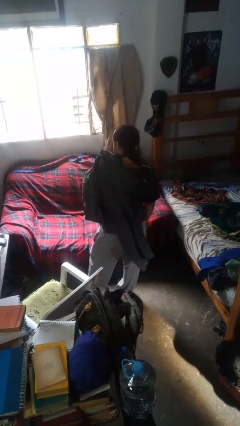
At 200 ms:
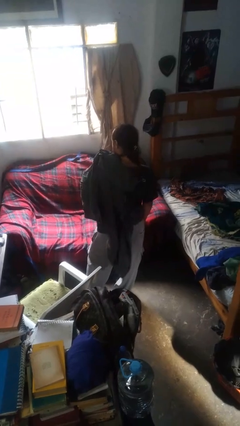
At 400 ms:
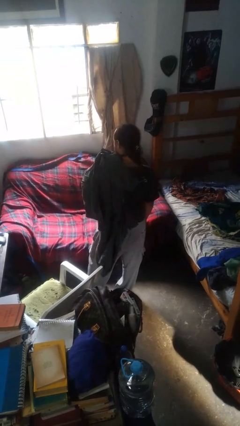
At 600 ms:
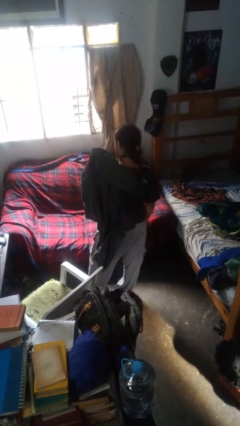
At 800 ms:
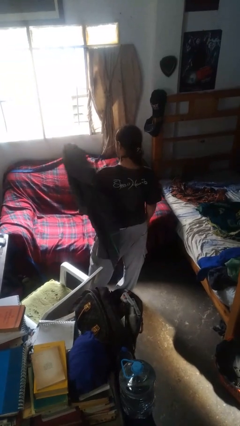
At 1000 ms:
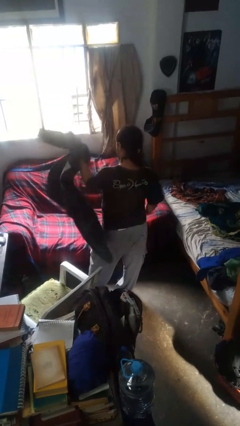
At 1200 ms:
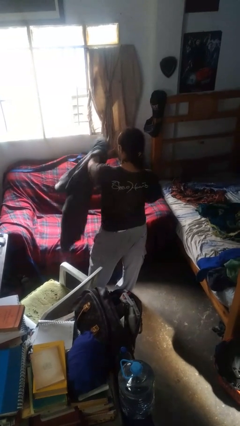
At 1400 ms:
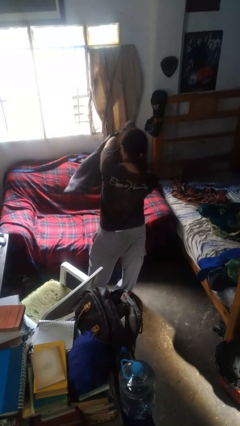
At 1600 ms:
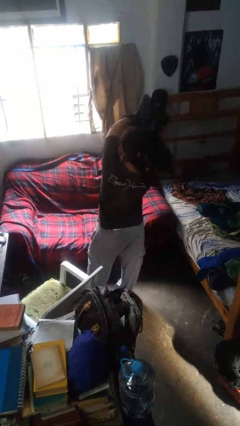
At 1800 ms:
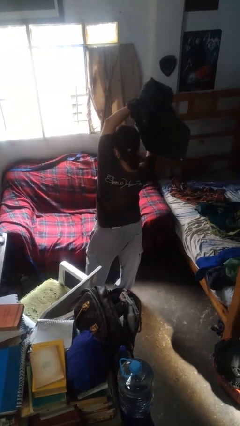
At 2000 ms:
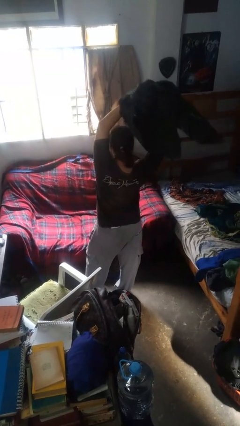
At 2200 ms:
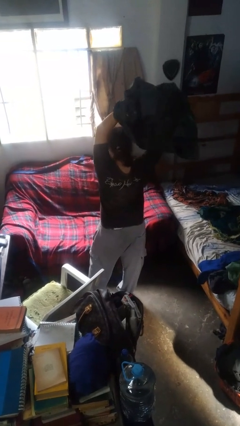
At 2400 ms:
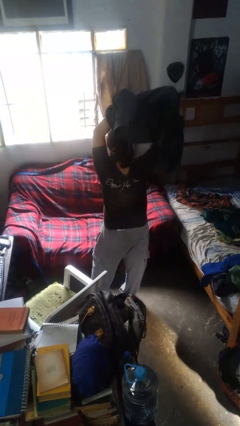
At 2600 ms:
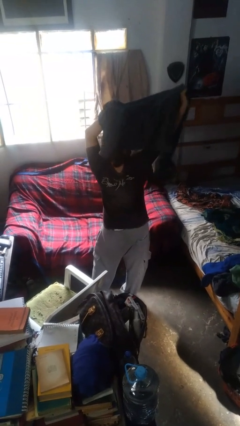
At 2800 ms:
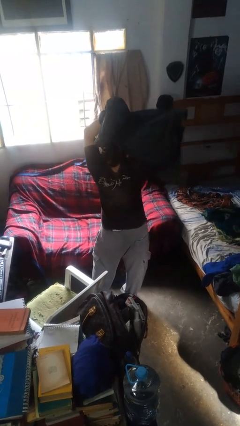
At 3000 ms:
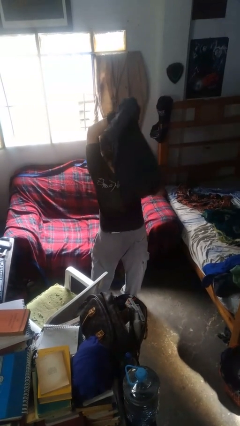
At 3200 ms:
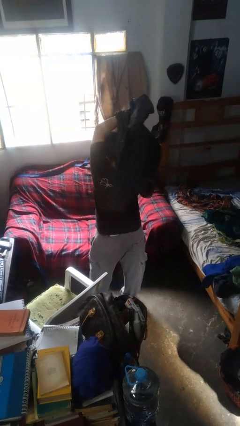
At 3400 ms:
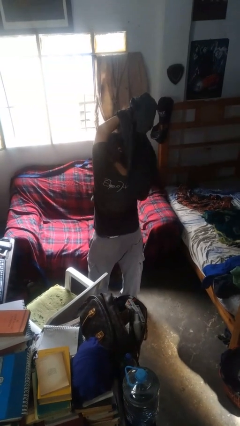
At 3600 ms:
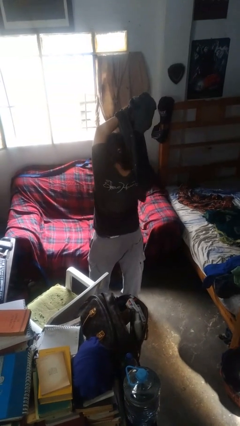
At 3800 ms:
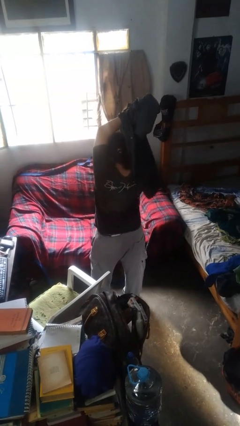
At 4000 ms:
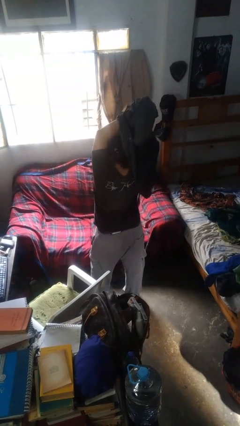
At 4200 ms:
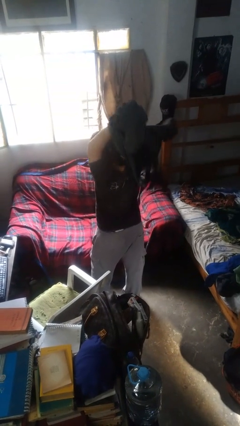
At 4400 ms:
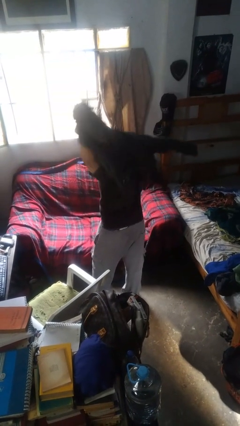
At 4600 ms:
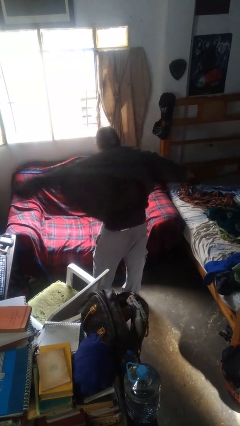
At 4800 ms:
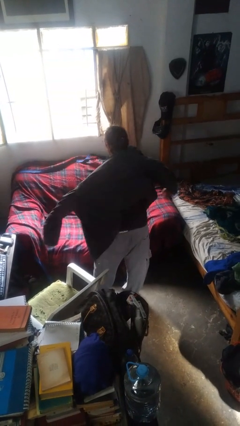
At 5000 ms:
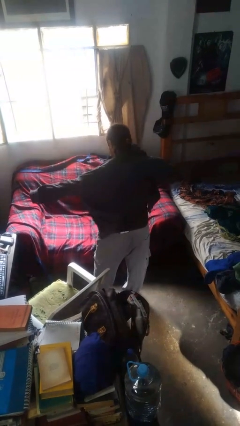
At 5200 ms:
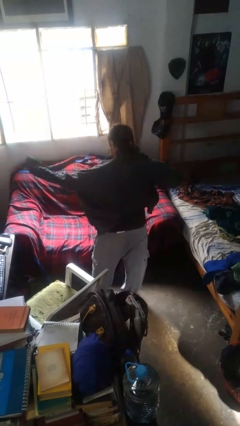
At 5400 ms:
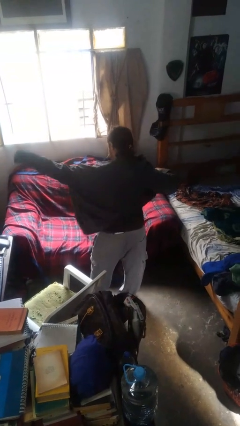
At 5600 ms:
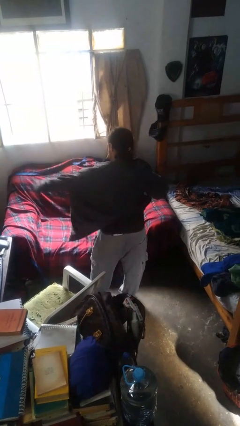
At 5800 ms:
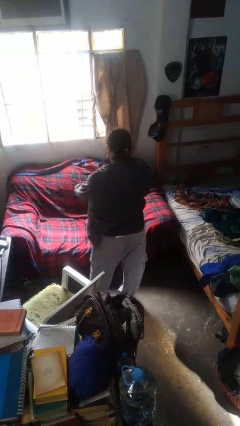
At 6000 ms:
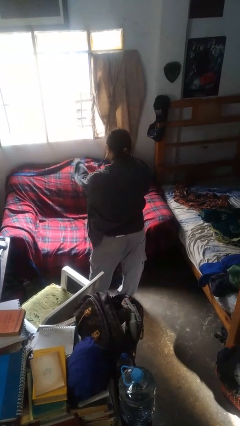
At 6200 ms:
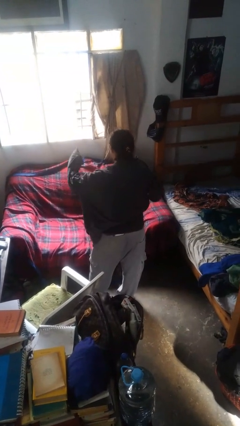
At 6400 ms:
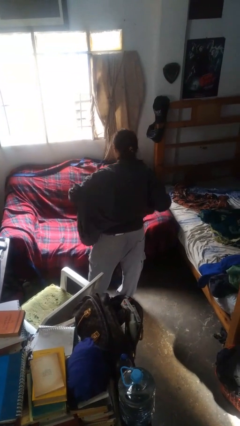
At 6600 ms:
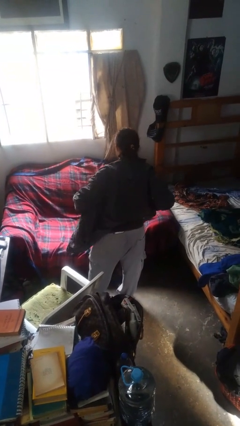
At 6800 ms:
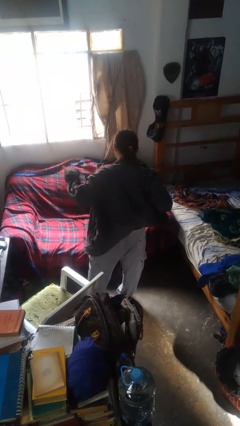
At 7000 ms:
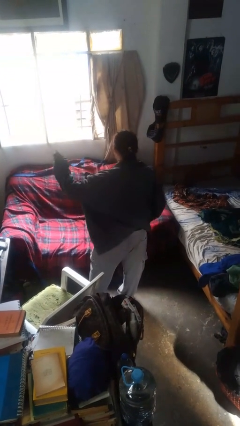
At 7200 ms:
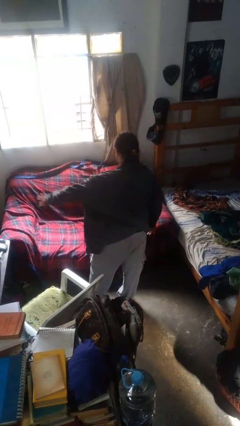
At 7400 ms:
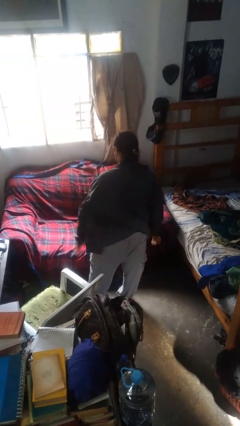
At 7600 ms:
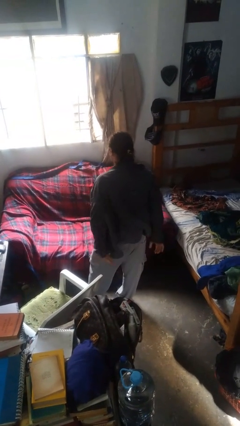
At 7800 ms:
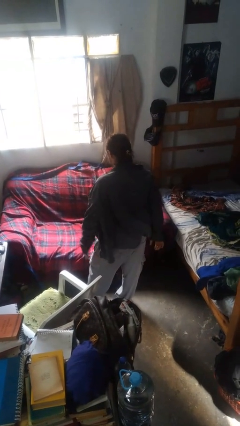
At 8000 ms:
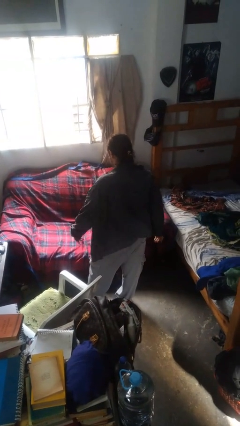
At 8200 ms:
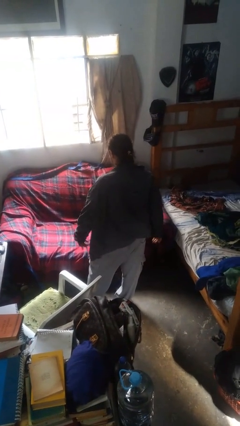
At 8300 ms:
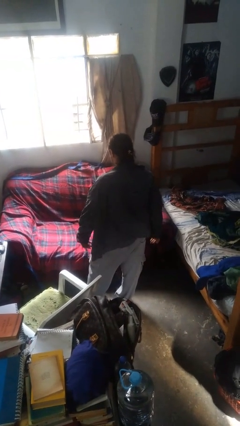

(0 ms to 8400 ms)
person puts on jacket

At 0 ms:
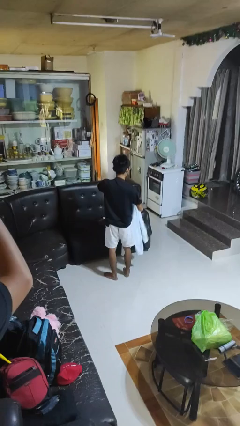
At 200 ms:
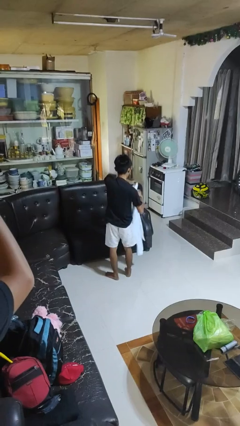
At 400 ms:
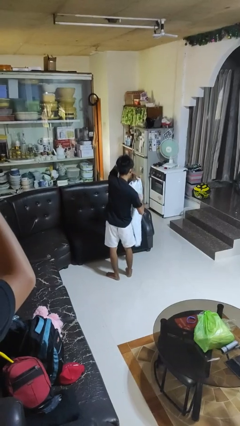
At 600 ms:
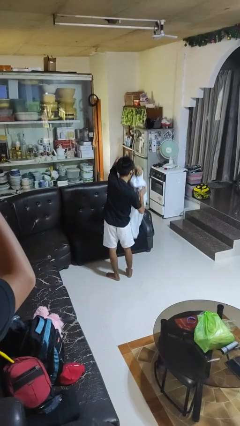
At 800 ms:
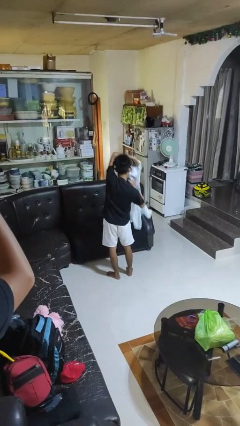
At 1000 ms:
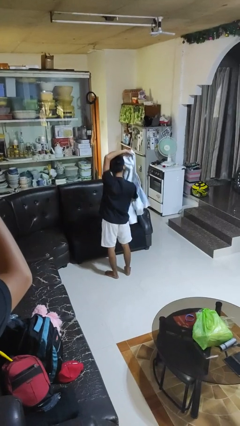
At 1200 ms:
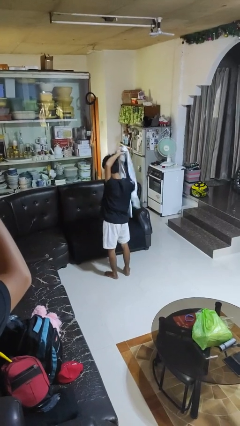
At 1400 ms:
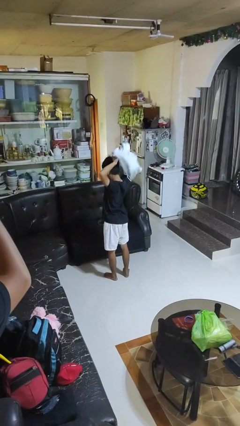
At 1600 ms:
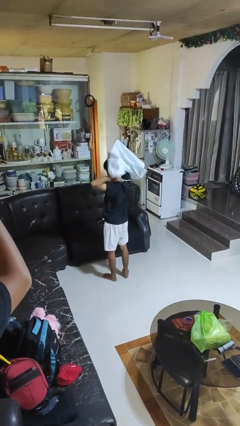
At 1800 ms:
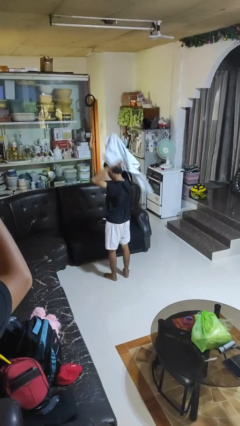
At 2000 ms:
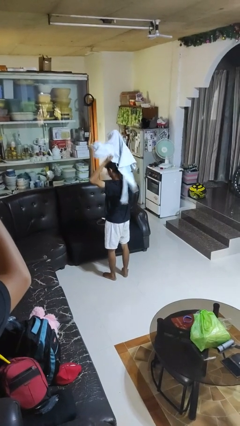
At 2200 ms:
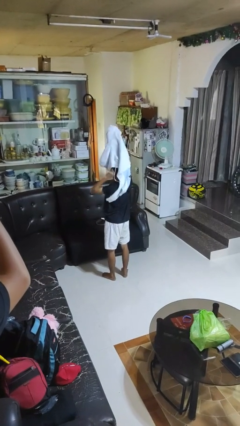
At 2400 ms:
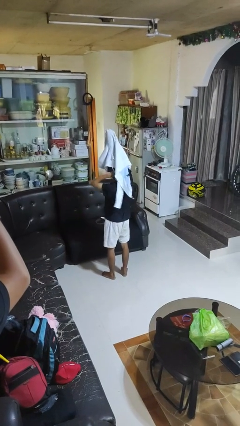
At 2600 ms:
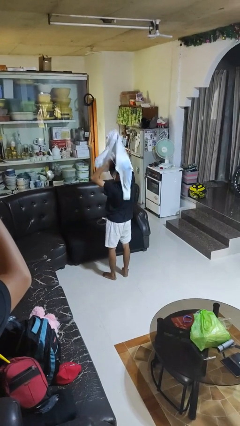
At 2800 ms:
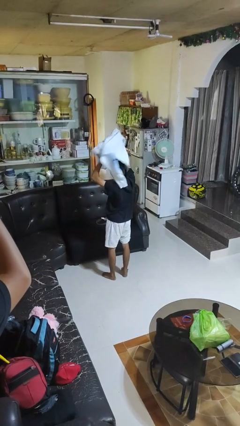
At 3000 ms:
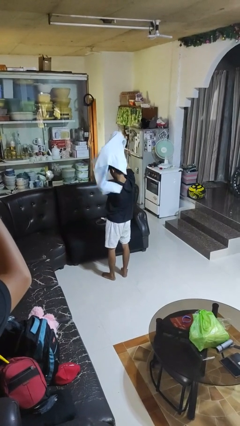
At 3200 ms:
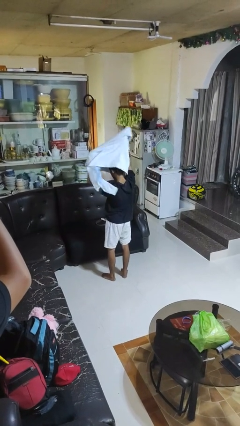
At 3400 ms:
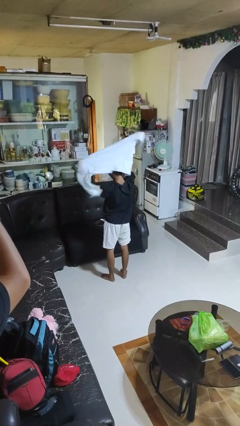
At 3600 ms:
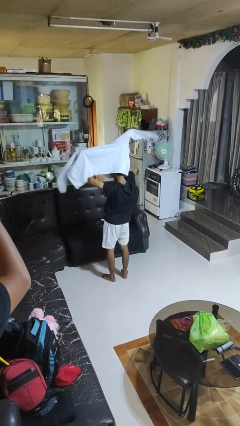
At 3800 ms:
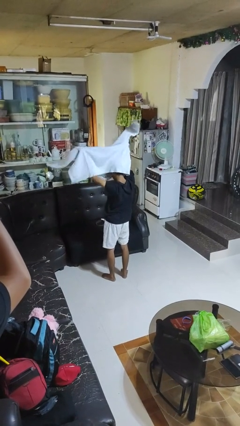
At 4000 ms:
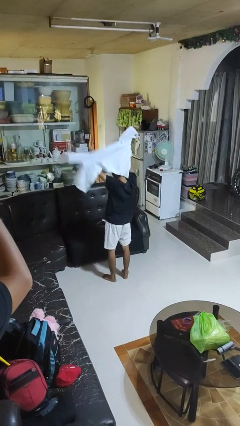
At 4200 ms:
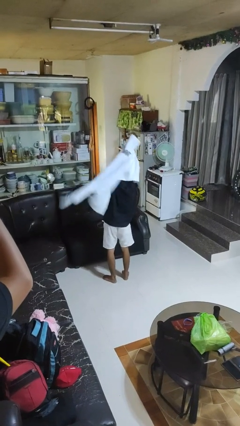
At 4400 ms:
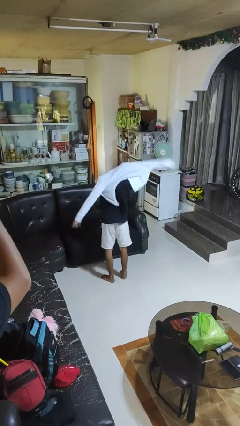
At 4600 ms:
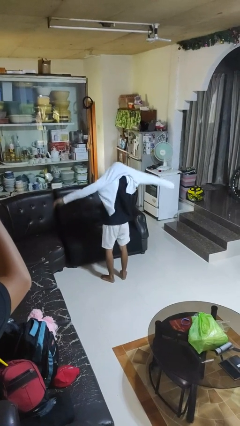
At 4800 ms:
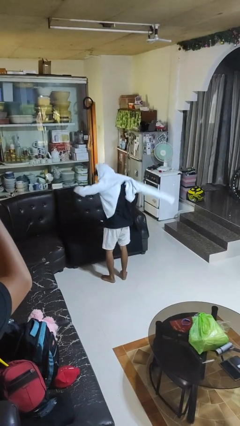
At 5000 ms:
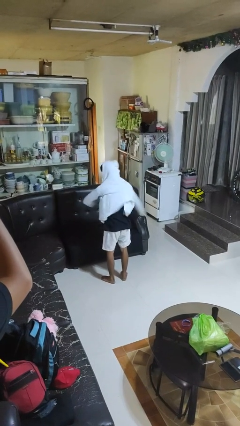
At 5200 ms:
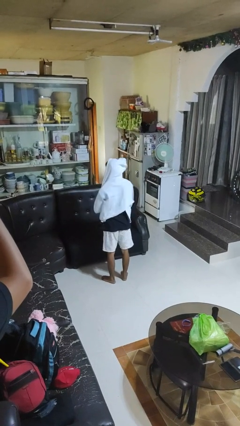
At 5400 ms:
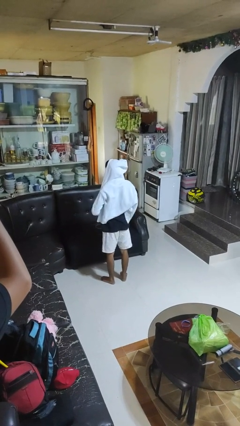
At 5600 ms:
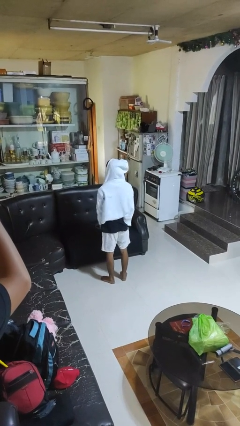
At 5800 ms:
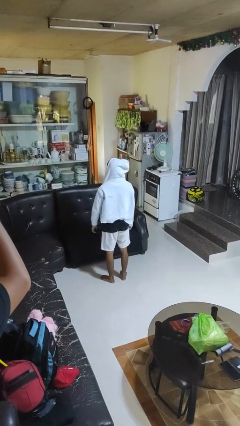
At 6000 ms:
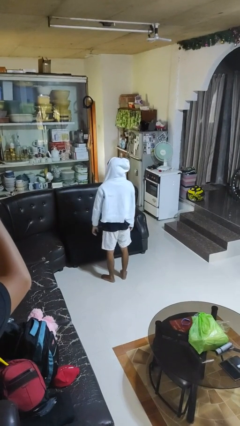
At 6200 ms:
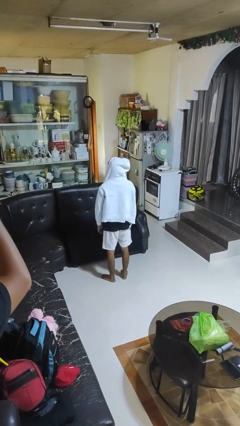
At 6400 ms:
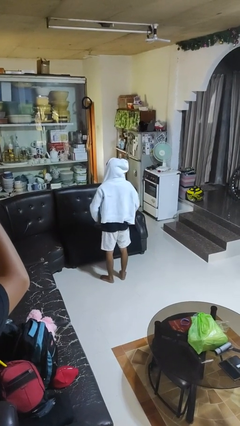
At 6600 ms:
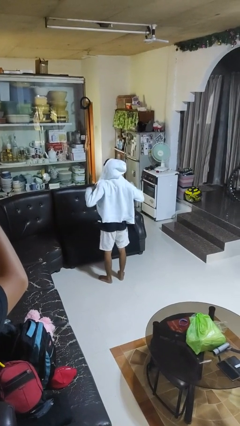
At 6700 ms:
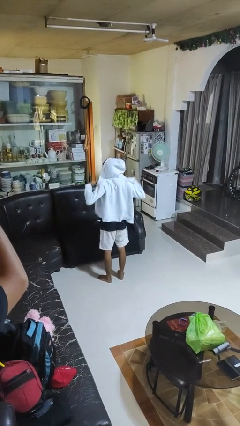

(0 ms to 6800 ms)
person puts on hoodie

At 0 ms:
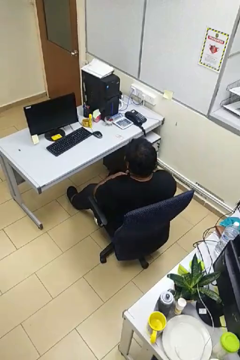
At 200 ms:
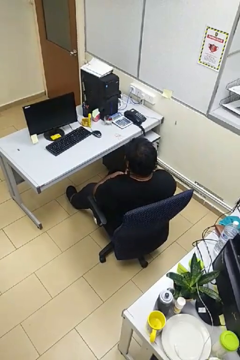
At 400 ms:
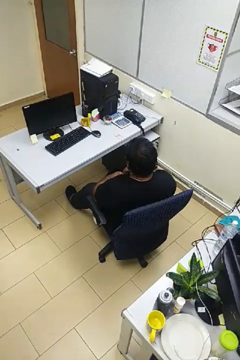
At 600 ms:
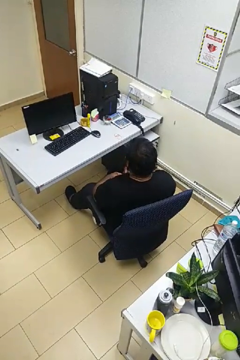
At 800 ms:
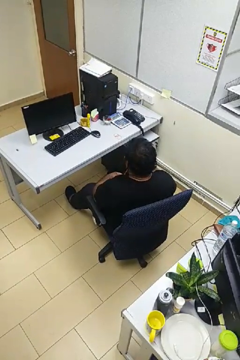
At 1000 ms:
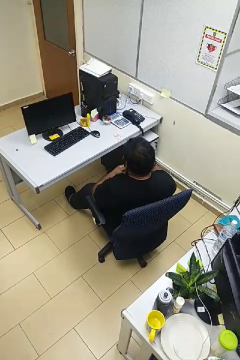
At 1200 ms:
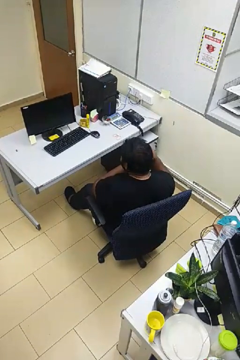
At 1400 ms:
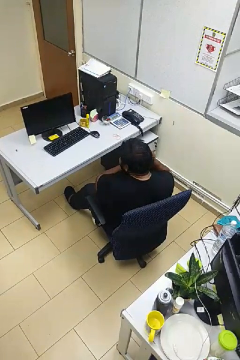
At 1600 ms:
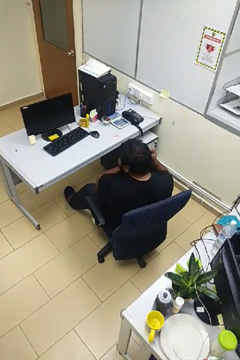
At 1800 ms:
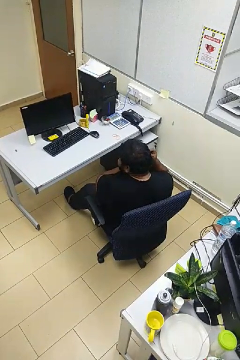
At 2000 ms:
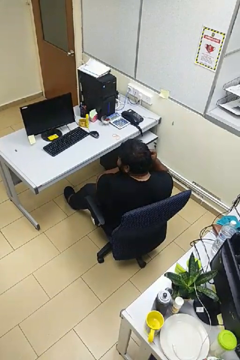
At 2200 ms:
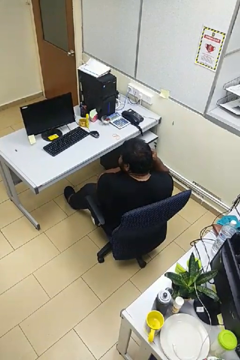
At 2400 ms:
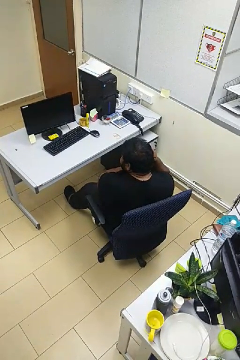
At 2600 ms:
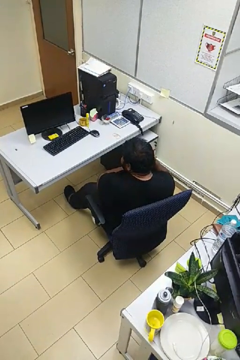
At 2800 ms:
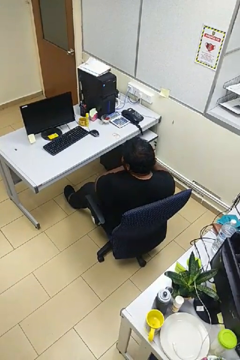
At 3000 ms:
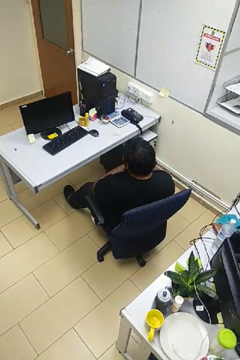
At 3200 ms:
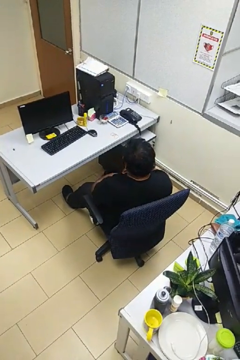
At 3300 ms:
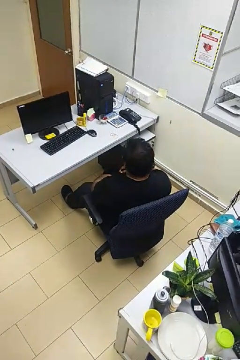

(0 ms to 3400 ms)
person puts on earrings
